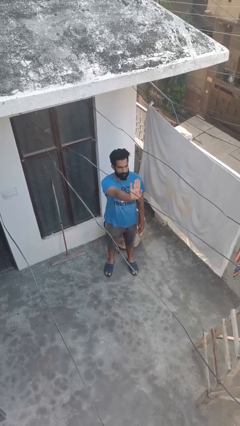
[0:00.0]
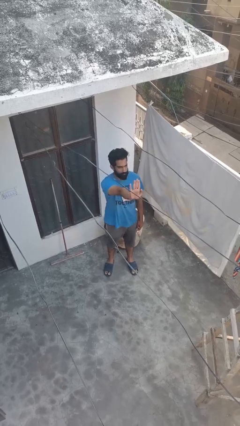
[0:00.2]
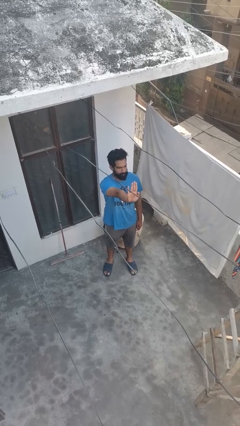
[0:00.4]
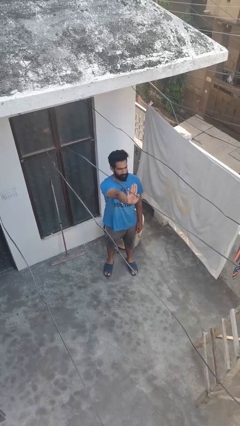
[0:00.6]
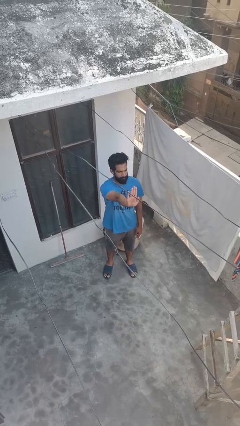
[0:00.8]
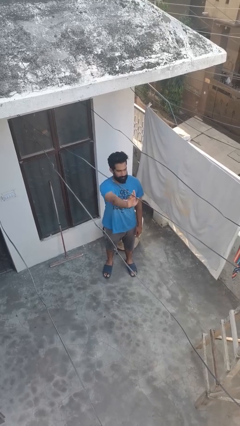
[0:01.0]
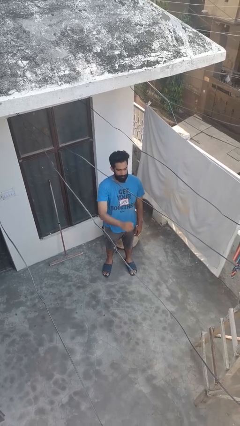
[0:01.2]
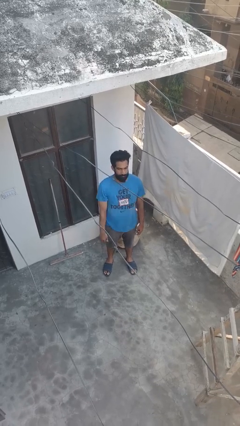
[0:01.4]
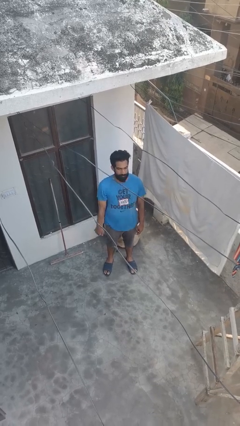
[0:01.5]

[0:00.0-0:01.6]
person gestures stop

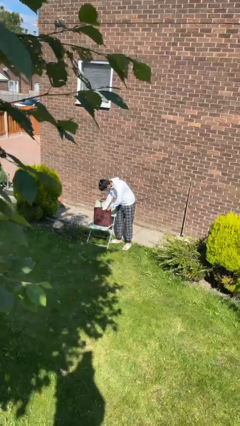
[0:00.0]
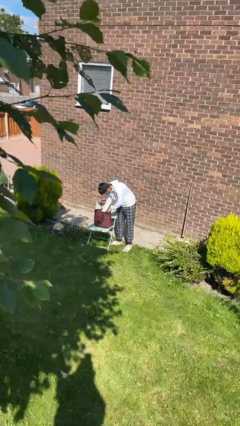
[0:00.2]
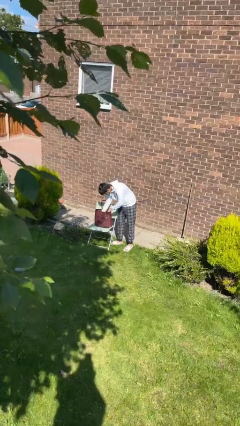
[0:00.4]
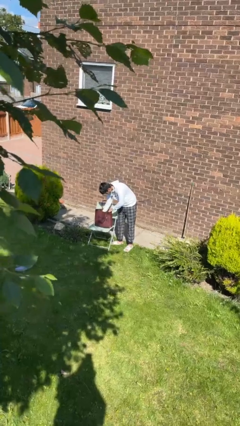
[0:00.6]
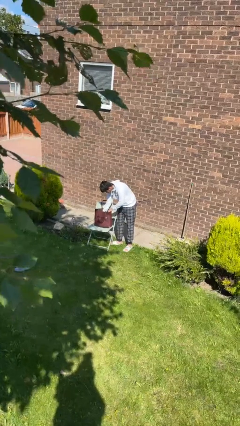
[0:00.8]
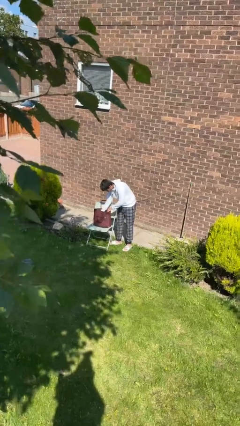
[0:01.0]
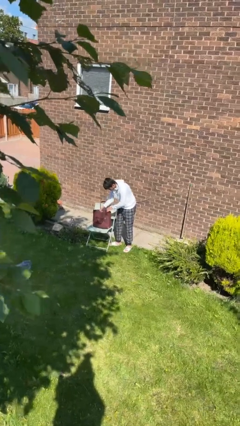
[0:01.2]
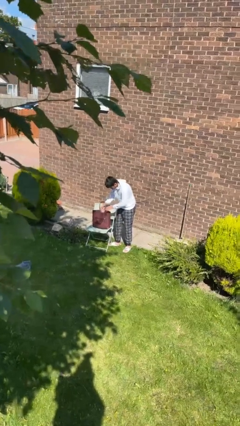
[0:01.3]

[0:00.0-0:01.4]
person takes object from purse

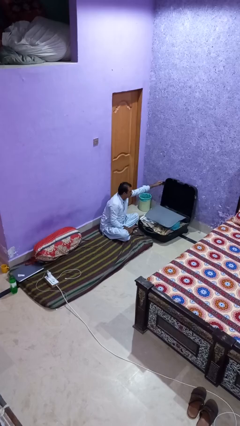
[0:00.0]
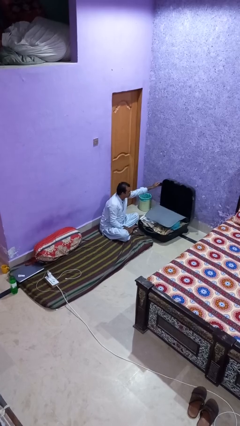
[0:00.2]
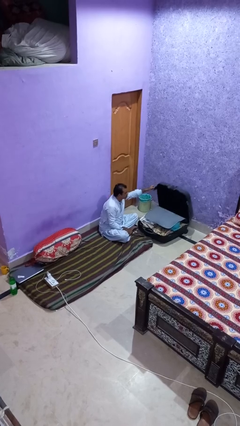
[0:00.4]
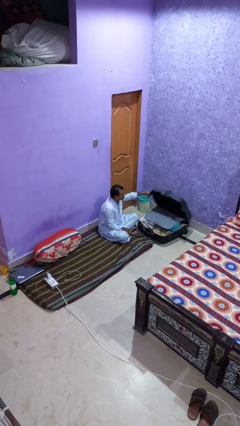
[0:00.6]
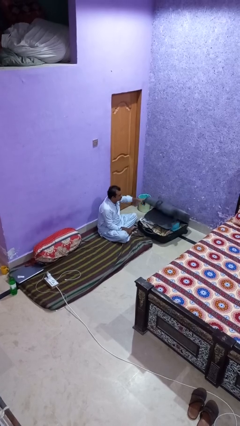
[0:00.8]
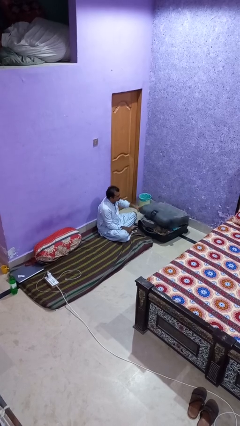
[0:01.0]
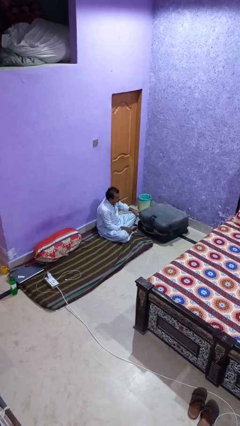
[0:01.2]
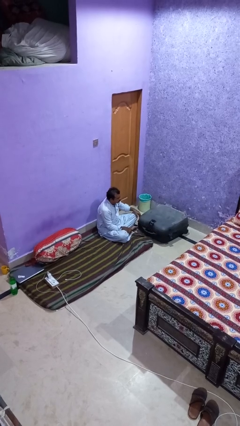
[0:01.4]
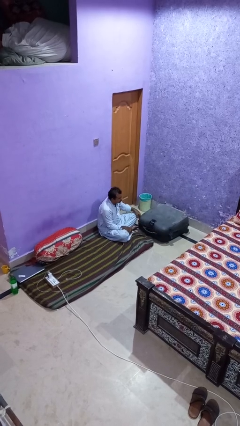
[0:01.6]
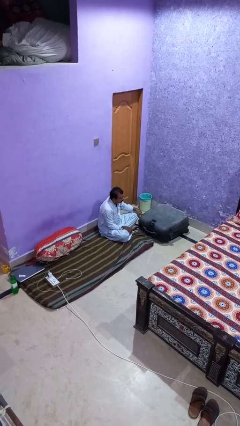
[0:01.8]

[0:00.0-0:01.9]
person closes suitcase

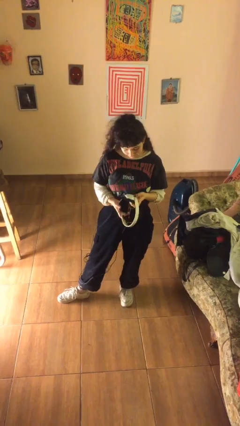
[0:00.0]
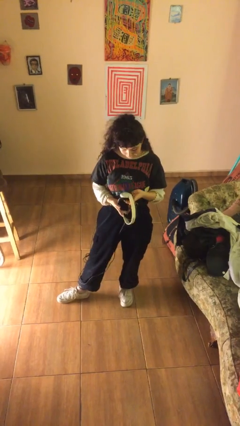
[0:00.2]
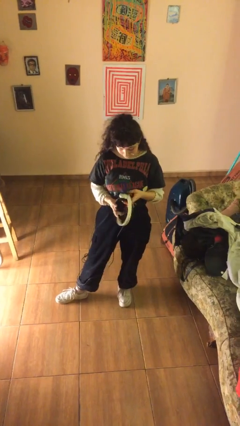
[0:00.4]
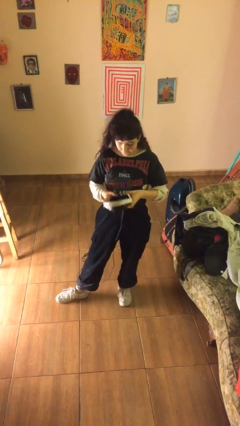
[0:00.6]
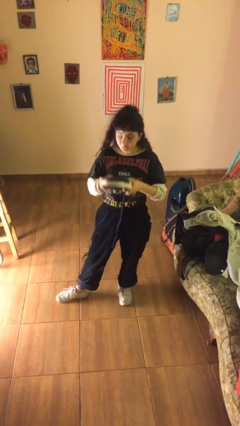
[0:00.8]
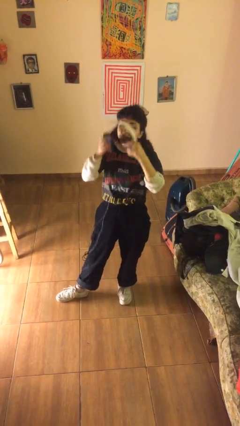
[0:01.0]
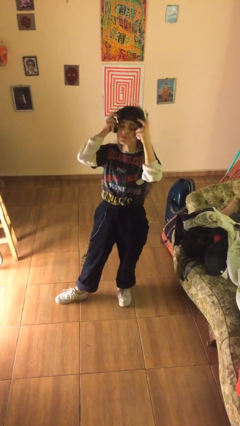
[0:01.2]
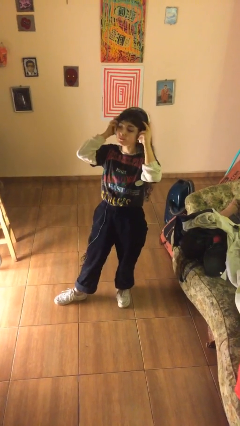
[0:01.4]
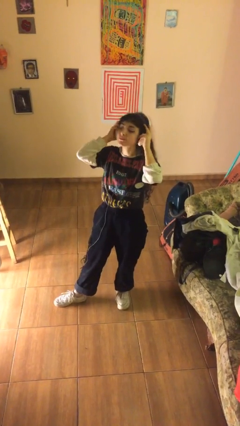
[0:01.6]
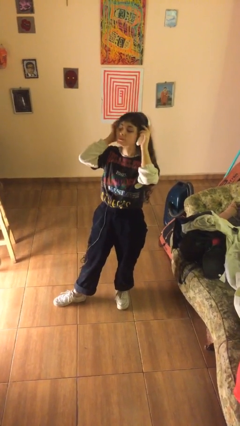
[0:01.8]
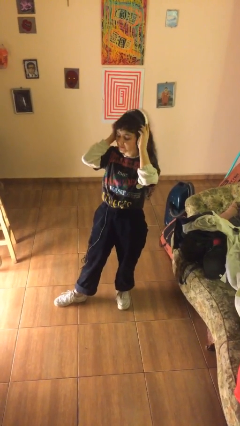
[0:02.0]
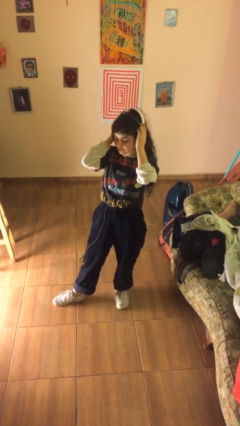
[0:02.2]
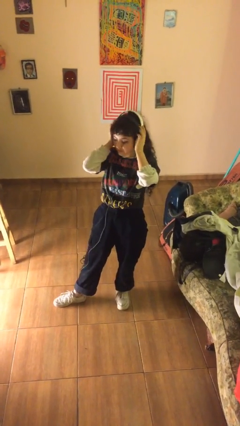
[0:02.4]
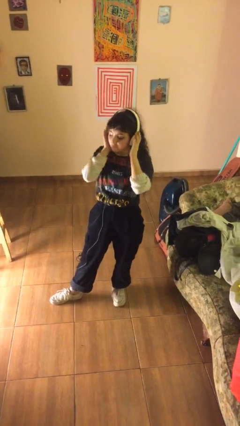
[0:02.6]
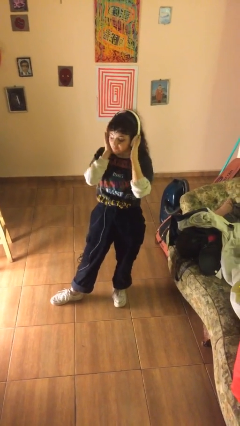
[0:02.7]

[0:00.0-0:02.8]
person puts on headphones

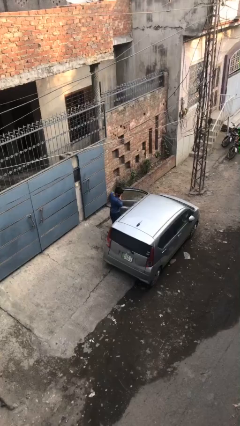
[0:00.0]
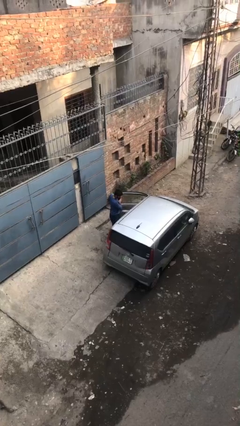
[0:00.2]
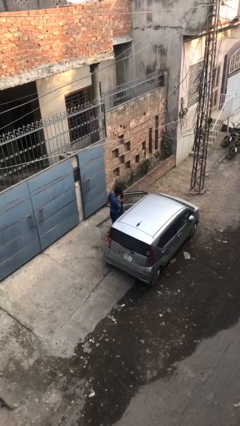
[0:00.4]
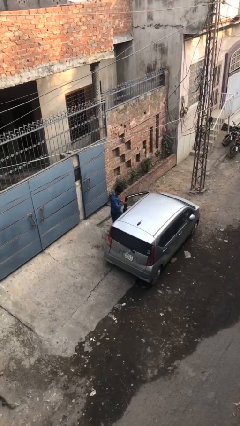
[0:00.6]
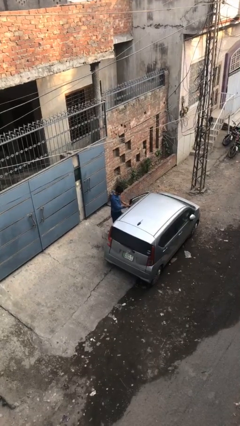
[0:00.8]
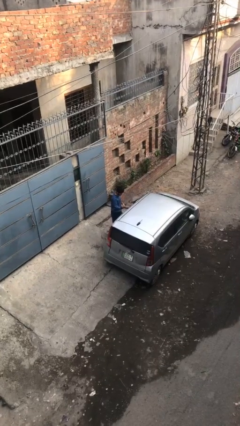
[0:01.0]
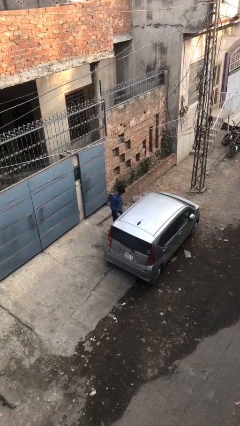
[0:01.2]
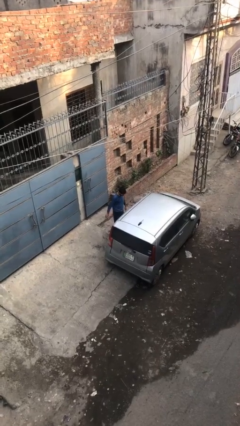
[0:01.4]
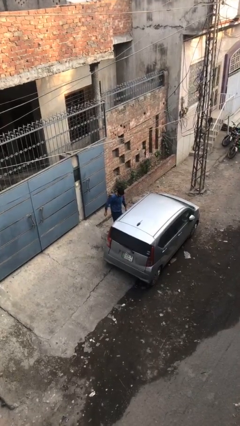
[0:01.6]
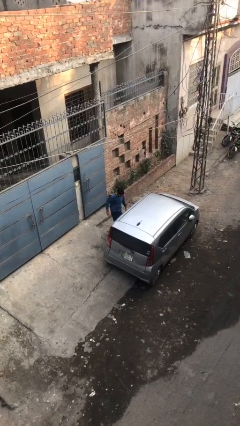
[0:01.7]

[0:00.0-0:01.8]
person closes car door

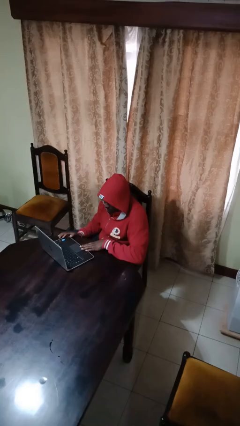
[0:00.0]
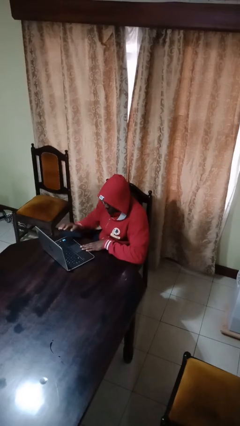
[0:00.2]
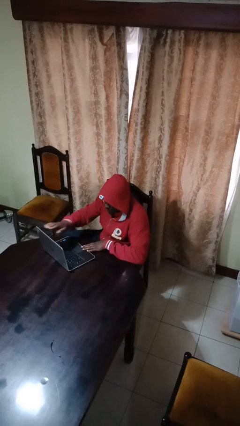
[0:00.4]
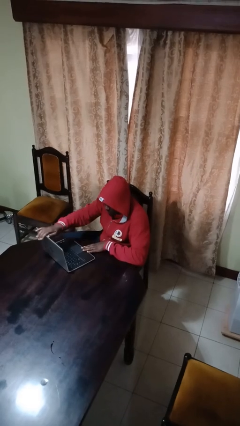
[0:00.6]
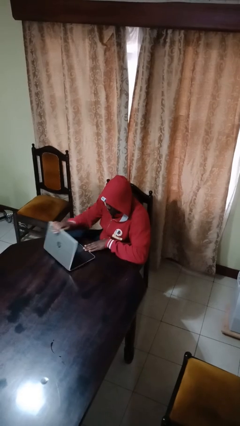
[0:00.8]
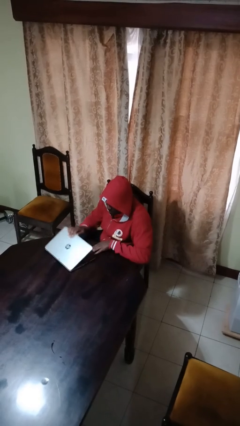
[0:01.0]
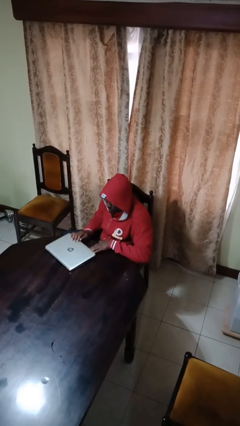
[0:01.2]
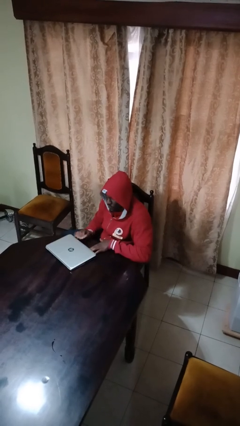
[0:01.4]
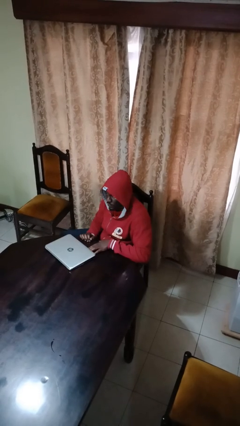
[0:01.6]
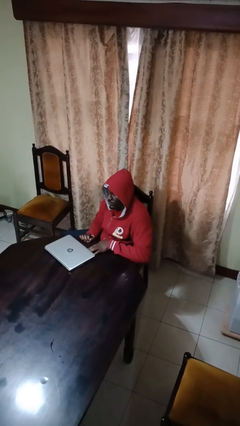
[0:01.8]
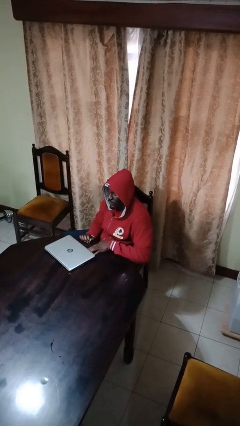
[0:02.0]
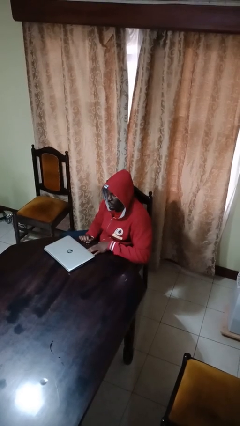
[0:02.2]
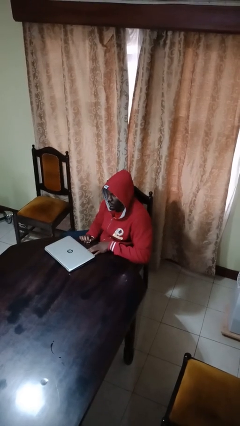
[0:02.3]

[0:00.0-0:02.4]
person closes laptop

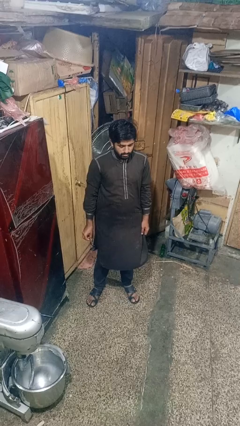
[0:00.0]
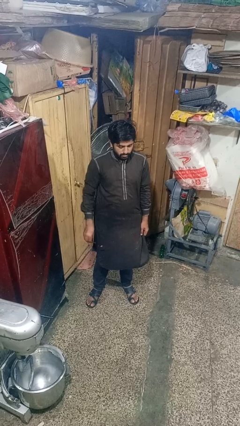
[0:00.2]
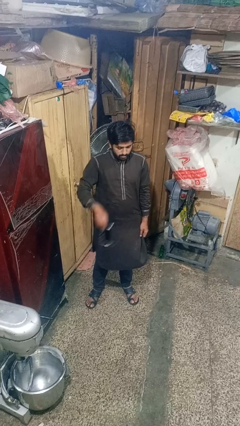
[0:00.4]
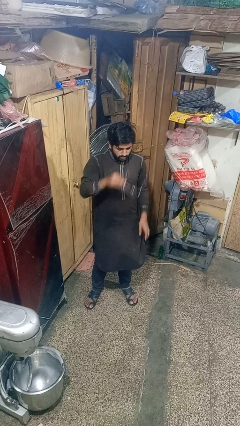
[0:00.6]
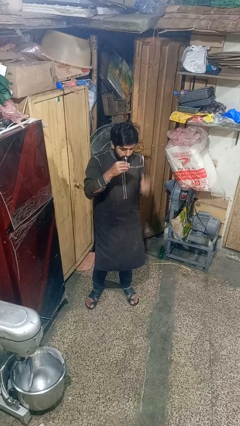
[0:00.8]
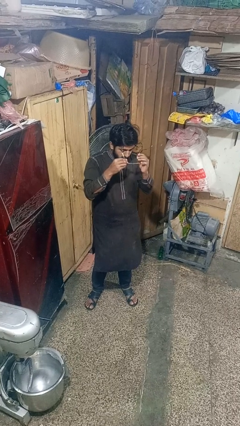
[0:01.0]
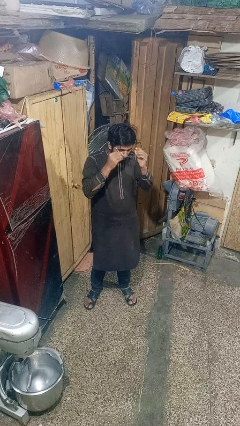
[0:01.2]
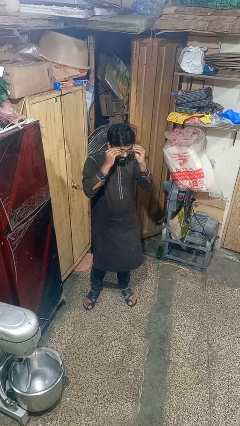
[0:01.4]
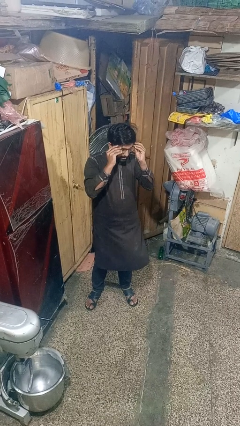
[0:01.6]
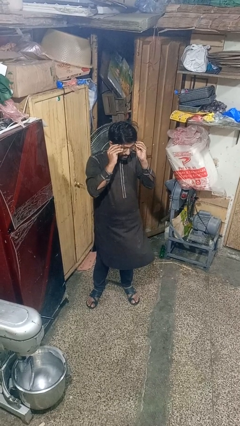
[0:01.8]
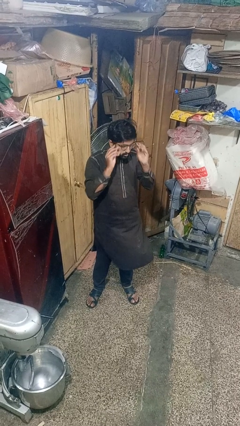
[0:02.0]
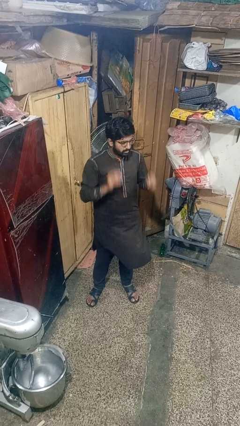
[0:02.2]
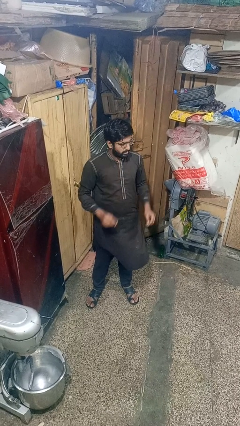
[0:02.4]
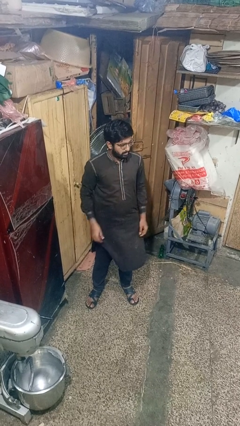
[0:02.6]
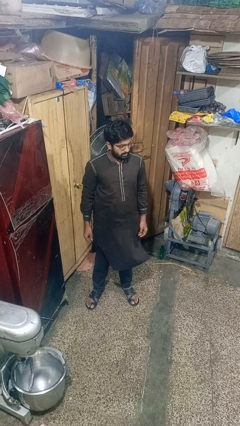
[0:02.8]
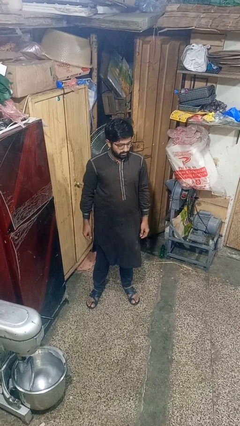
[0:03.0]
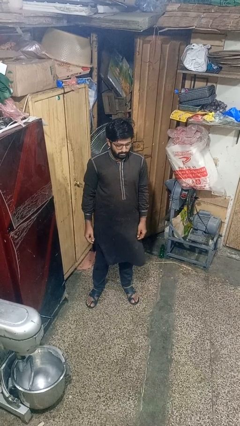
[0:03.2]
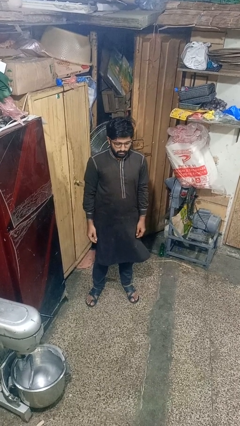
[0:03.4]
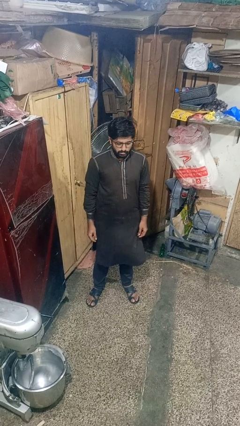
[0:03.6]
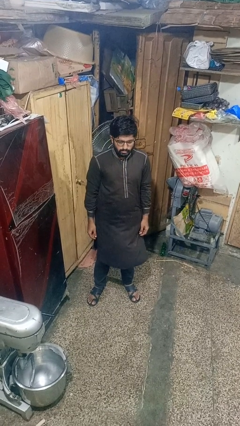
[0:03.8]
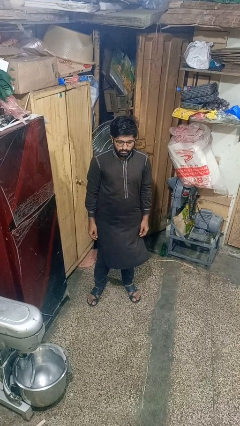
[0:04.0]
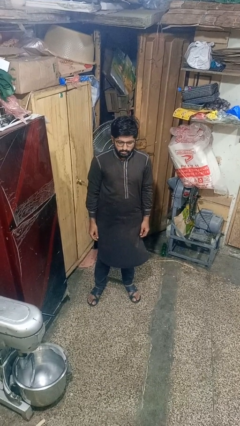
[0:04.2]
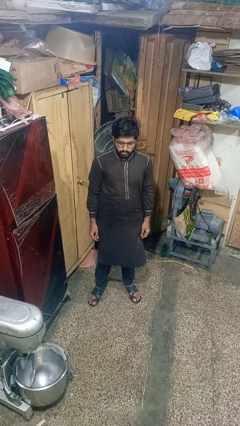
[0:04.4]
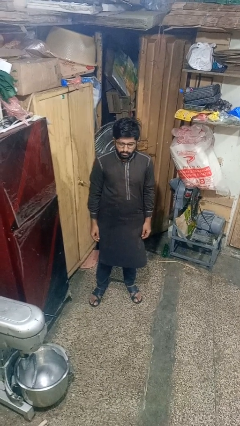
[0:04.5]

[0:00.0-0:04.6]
person puts on glasses

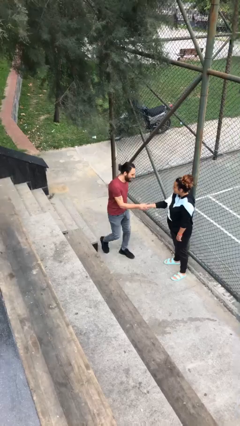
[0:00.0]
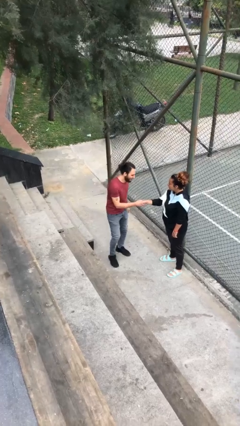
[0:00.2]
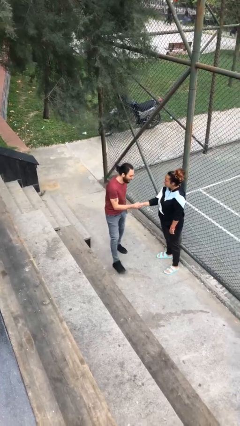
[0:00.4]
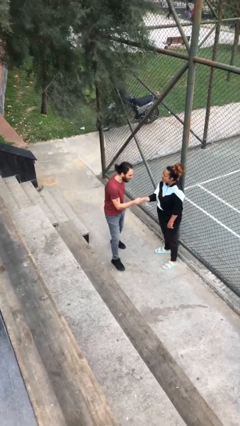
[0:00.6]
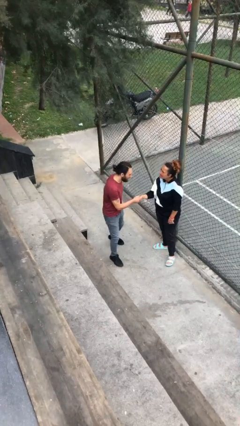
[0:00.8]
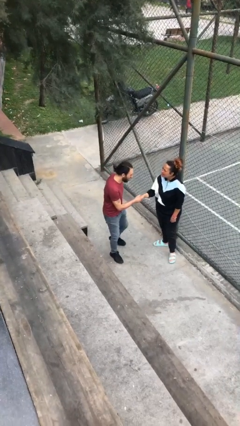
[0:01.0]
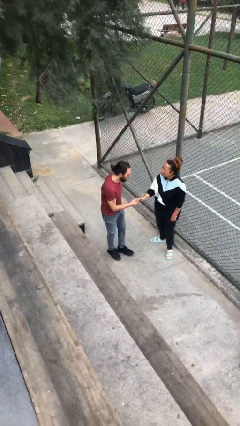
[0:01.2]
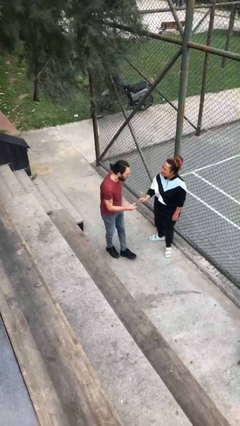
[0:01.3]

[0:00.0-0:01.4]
person shakes hand
